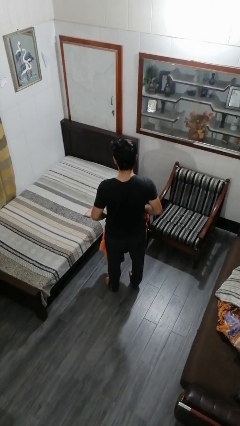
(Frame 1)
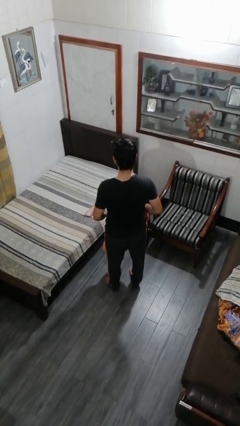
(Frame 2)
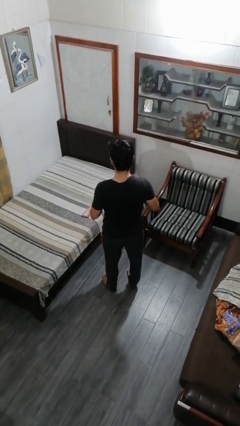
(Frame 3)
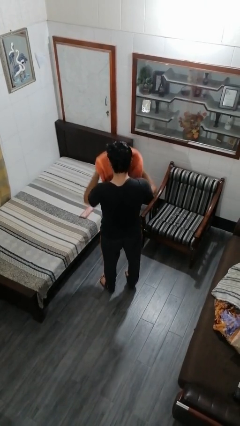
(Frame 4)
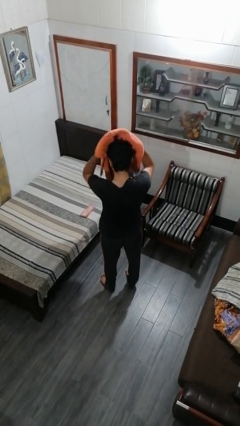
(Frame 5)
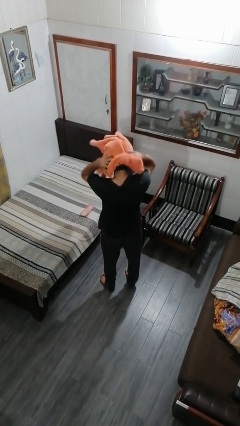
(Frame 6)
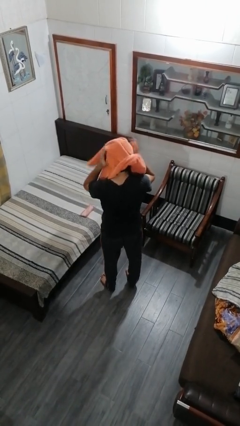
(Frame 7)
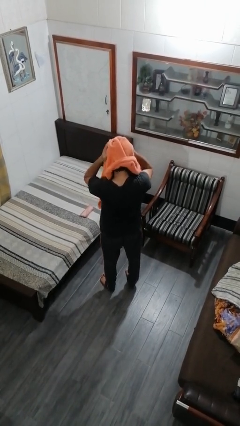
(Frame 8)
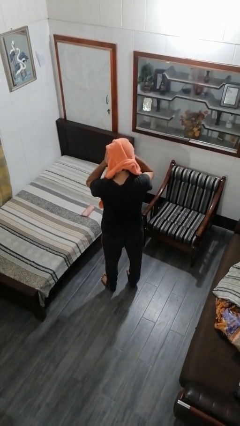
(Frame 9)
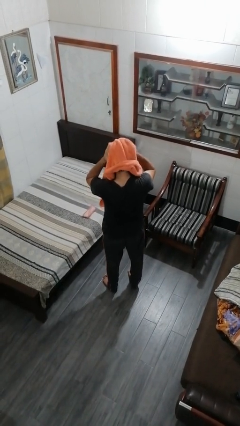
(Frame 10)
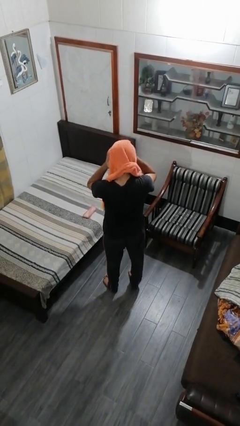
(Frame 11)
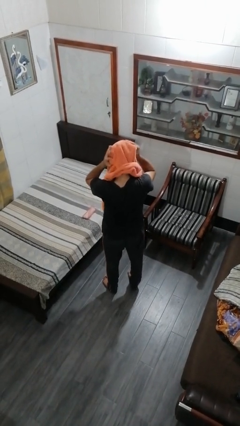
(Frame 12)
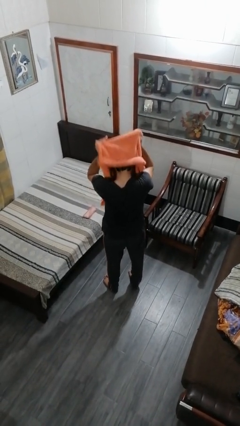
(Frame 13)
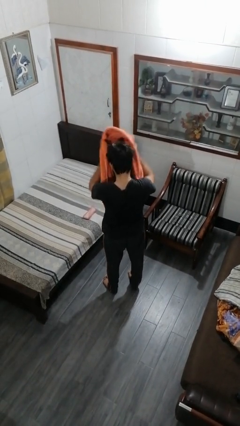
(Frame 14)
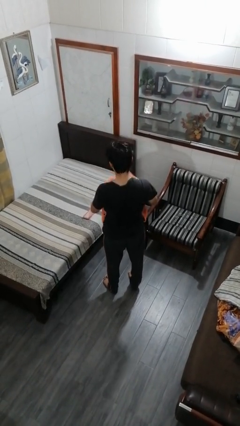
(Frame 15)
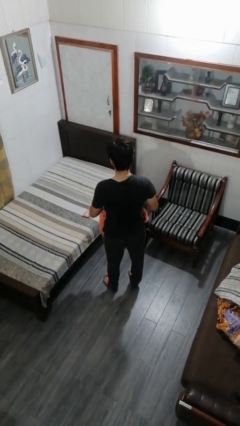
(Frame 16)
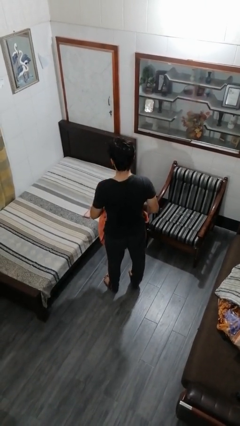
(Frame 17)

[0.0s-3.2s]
person dries hair with towel

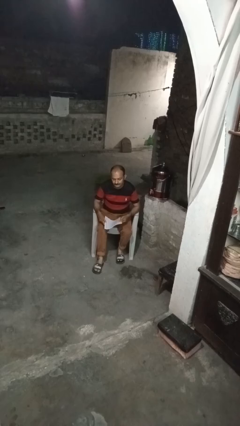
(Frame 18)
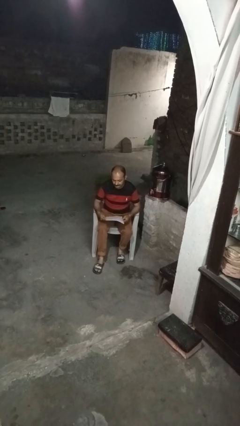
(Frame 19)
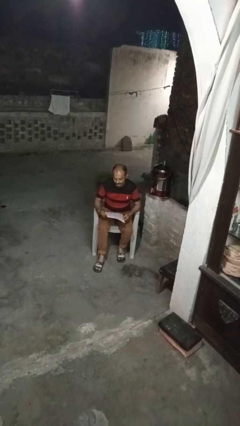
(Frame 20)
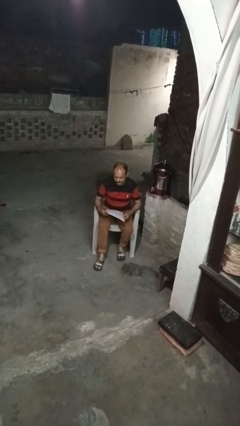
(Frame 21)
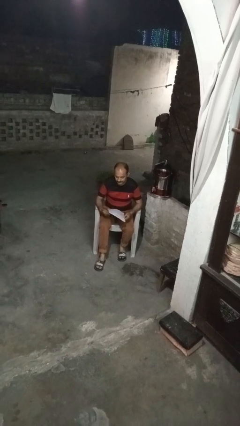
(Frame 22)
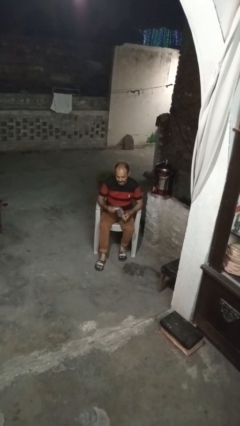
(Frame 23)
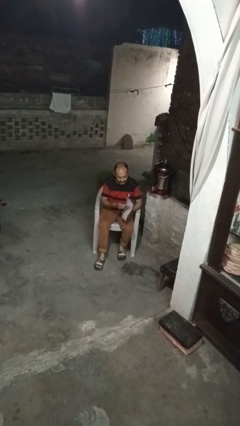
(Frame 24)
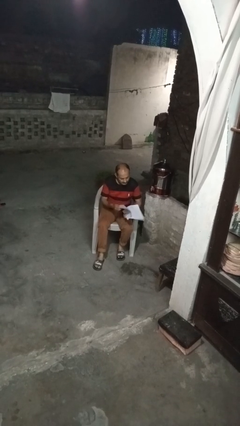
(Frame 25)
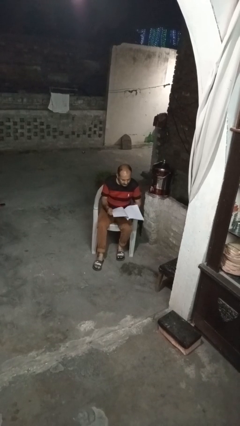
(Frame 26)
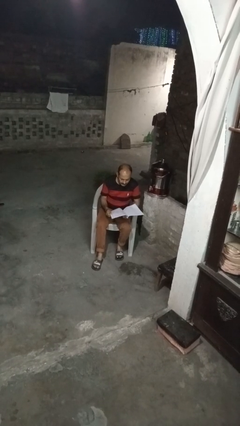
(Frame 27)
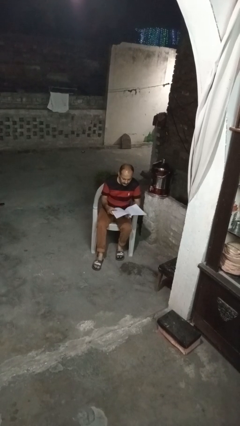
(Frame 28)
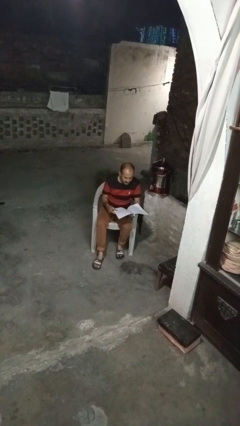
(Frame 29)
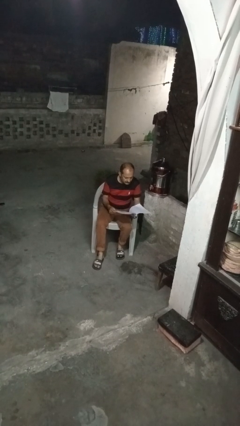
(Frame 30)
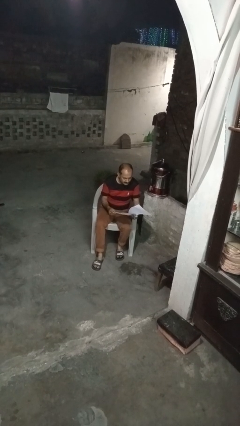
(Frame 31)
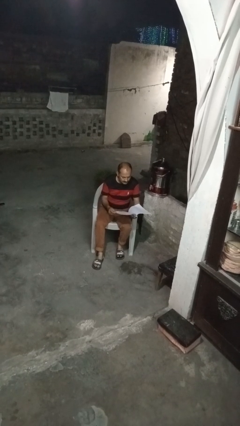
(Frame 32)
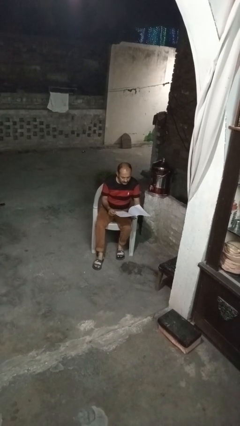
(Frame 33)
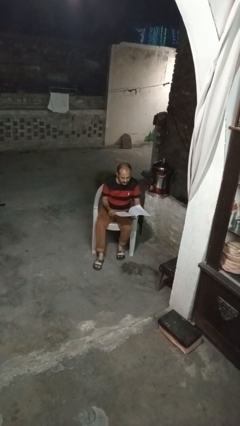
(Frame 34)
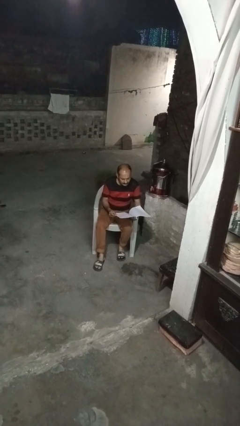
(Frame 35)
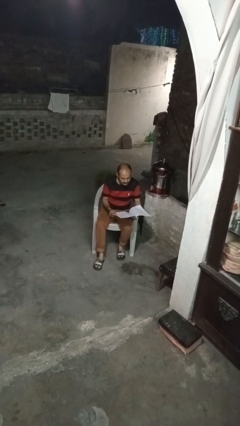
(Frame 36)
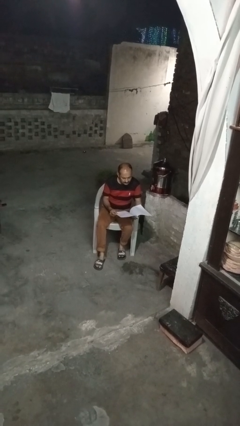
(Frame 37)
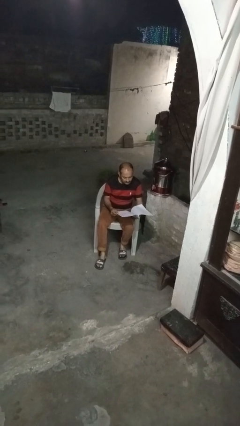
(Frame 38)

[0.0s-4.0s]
person reads magazine

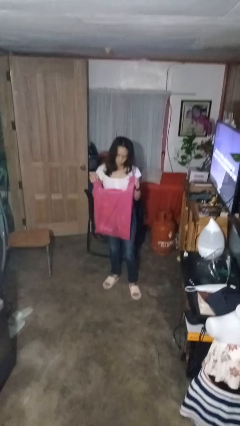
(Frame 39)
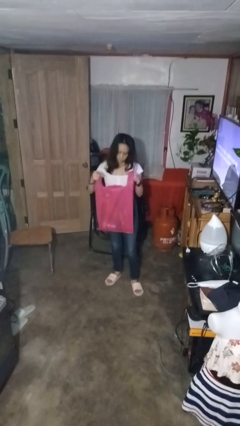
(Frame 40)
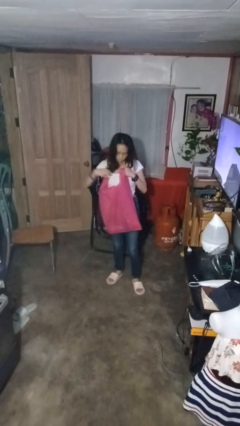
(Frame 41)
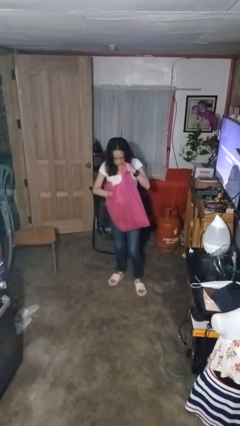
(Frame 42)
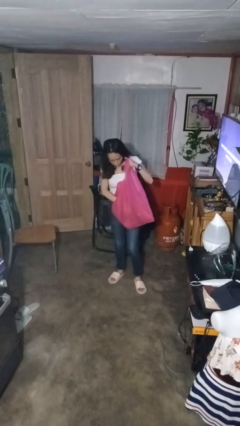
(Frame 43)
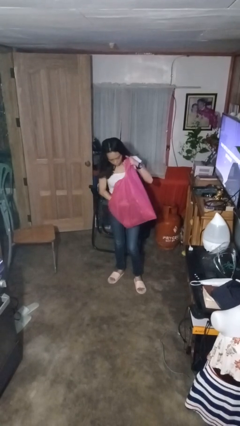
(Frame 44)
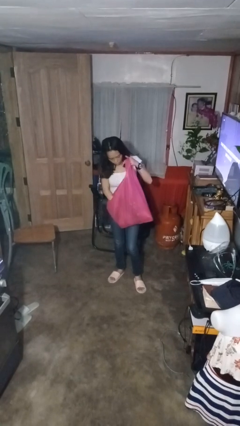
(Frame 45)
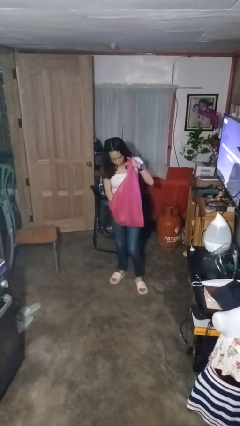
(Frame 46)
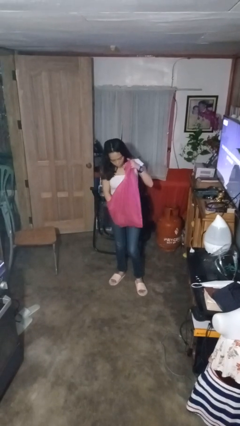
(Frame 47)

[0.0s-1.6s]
person searches in bag

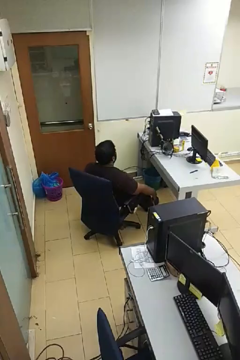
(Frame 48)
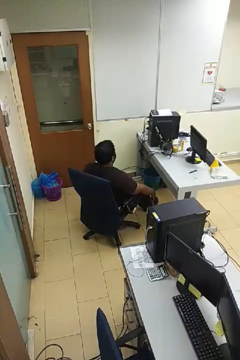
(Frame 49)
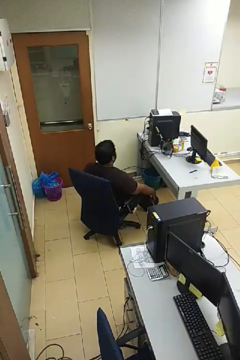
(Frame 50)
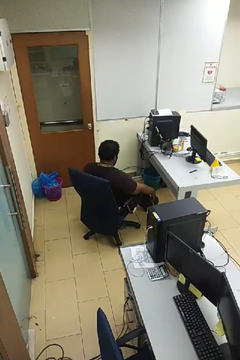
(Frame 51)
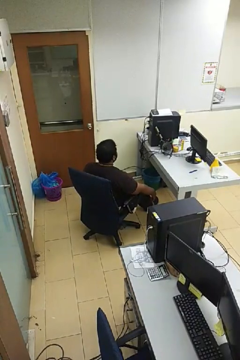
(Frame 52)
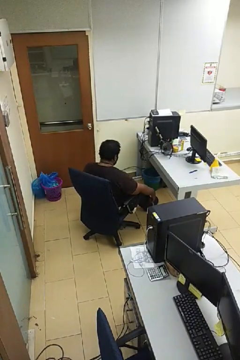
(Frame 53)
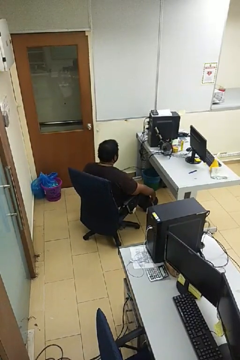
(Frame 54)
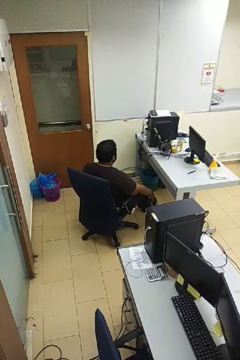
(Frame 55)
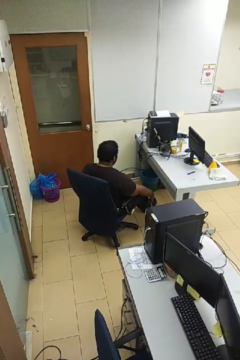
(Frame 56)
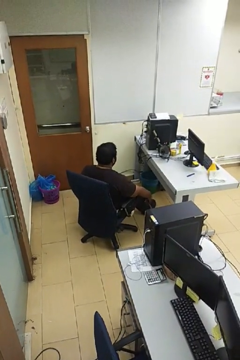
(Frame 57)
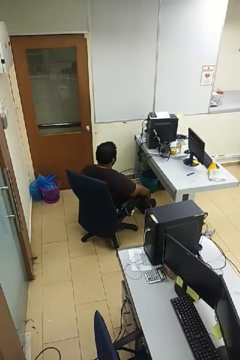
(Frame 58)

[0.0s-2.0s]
person nods head

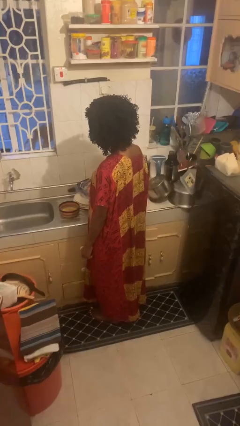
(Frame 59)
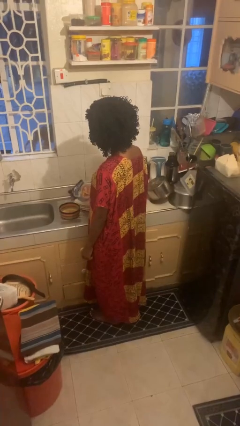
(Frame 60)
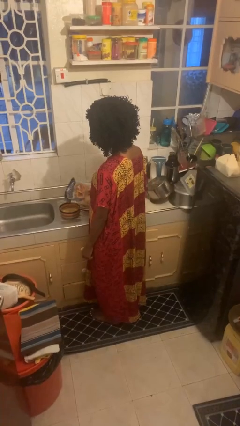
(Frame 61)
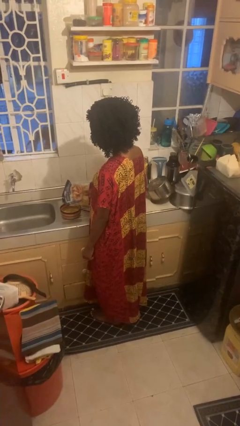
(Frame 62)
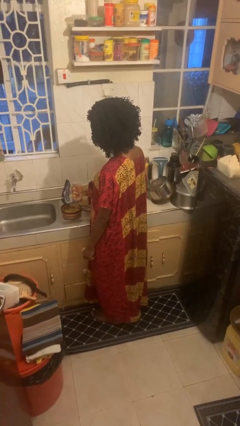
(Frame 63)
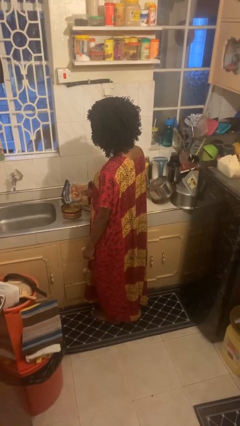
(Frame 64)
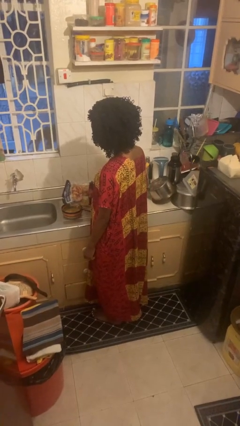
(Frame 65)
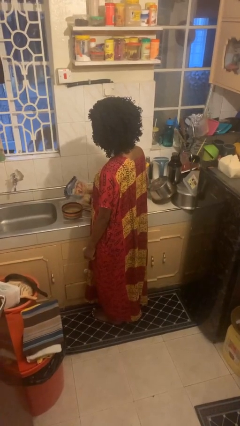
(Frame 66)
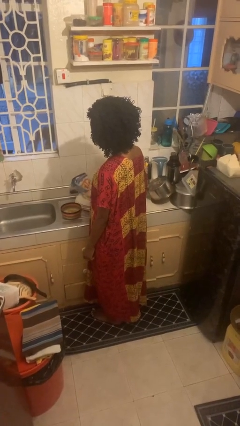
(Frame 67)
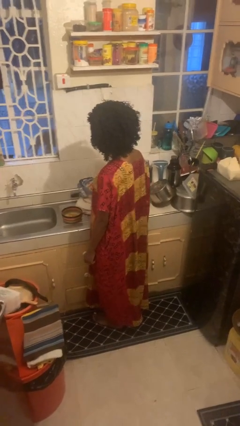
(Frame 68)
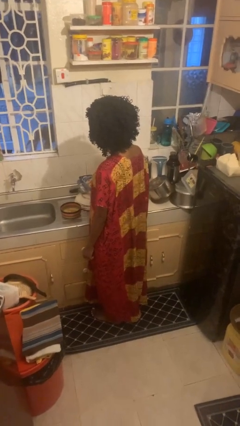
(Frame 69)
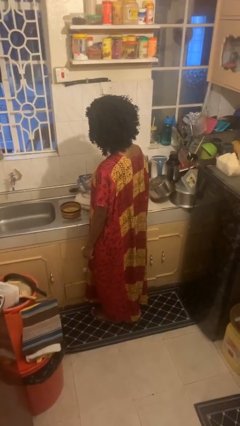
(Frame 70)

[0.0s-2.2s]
person pours into bowl

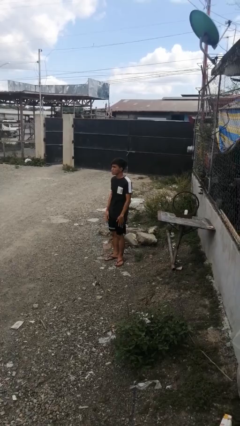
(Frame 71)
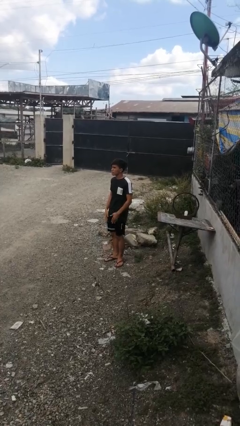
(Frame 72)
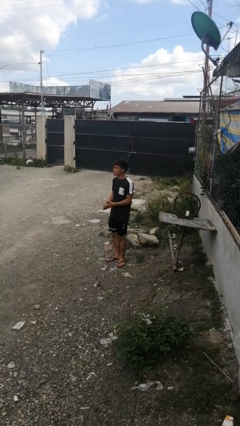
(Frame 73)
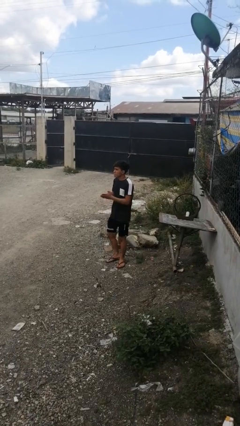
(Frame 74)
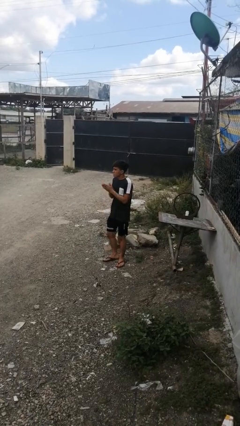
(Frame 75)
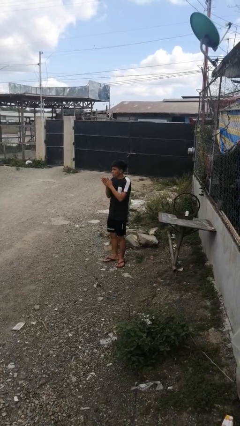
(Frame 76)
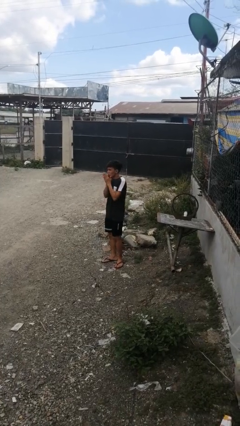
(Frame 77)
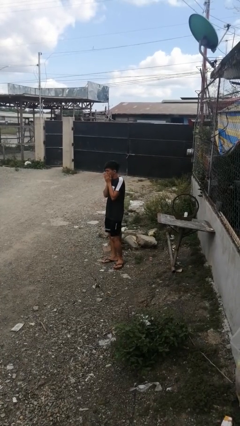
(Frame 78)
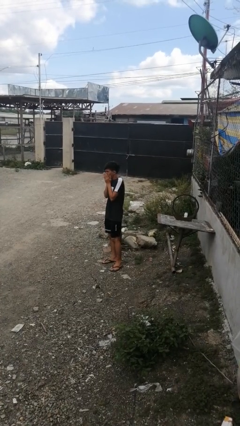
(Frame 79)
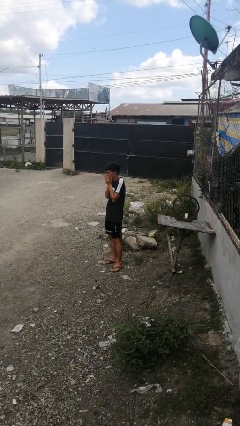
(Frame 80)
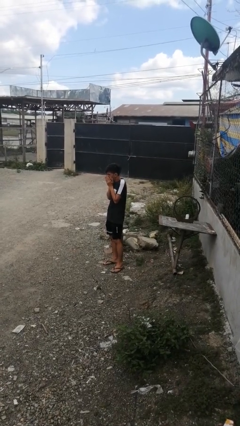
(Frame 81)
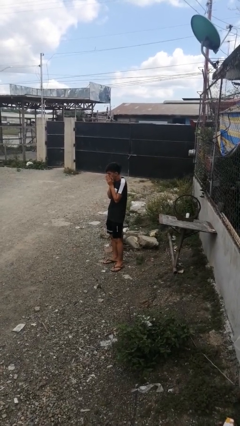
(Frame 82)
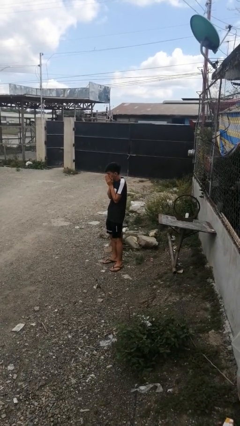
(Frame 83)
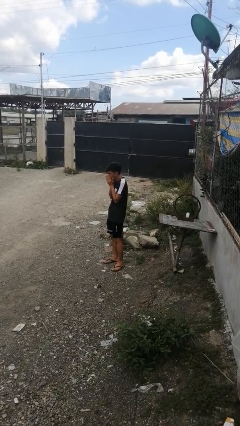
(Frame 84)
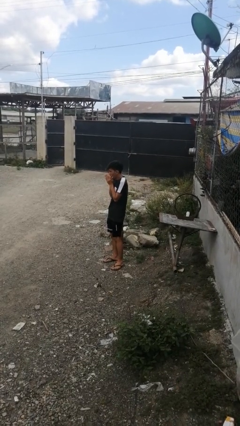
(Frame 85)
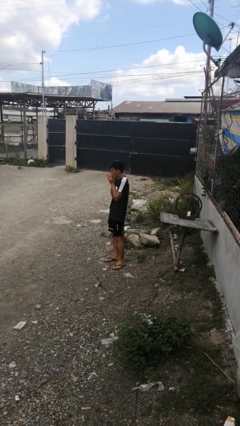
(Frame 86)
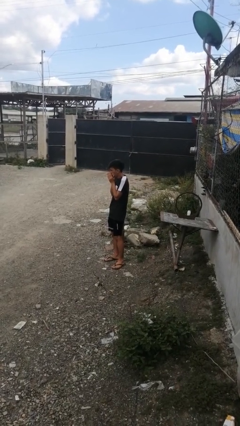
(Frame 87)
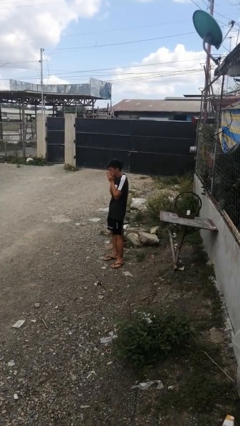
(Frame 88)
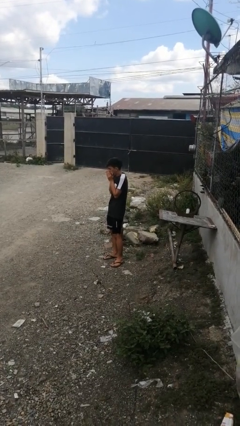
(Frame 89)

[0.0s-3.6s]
person blows into hands

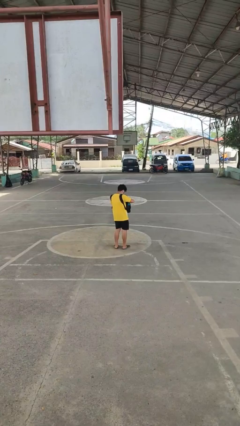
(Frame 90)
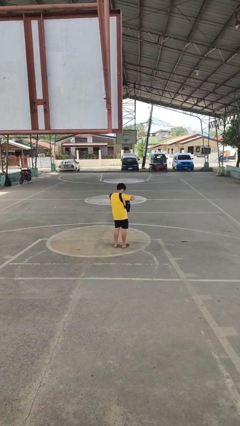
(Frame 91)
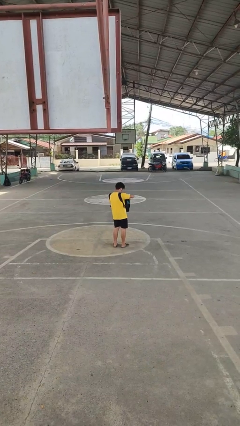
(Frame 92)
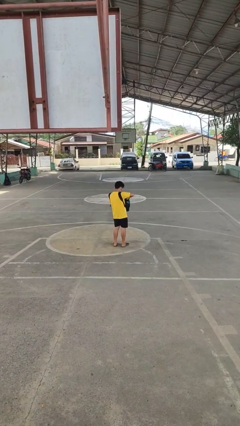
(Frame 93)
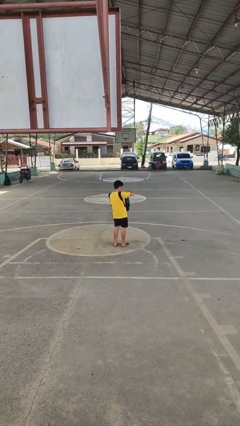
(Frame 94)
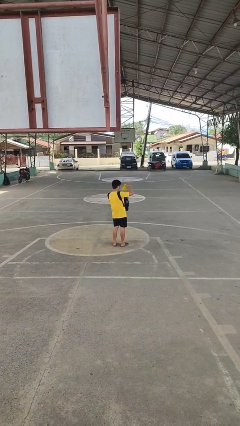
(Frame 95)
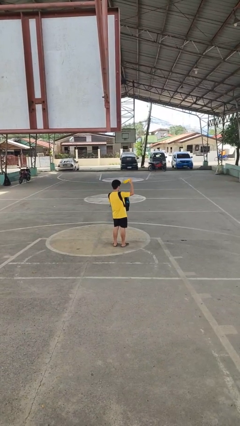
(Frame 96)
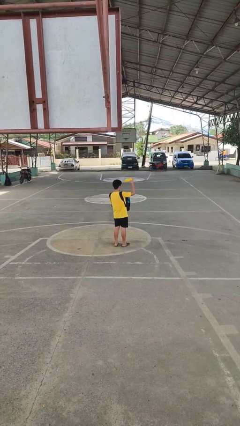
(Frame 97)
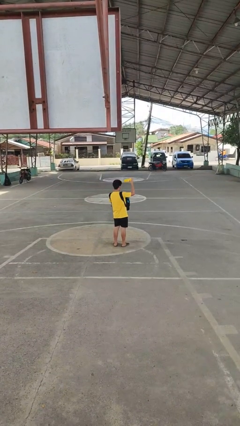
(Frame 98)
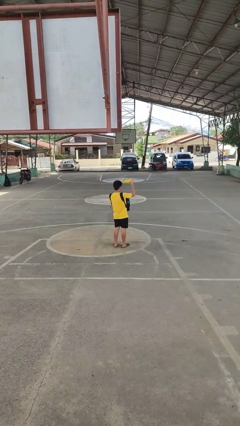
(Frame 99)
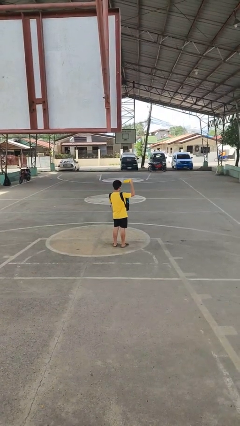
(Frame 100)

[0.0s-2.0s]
person takes object from backpack
